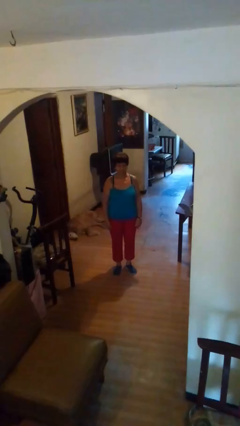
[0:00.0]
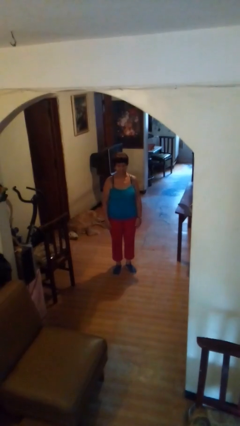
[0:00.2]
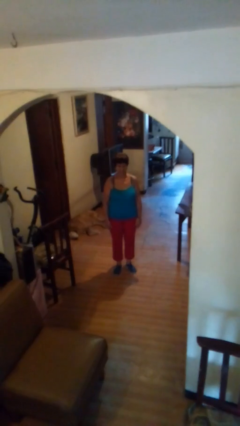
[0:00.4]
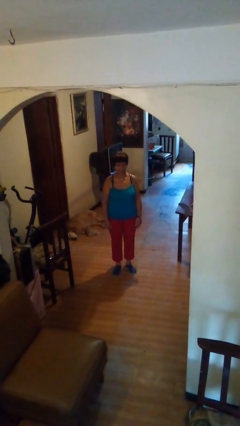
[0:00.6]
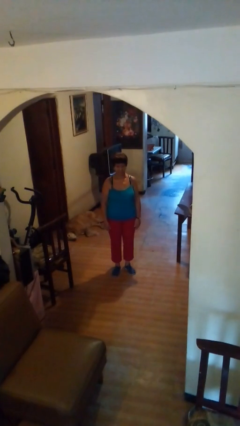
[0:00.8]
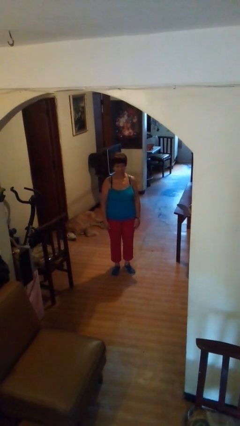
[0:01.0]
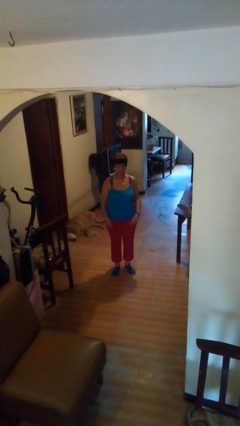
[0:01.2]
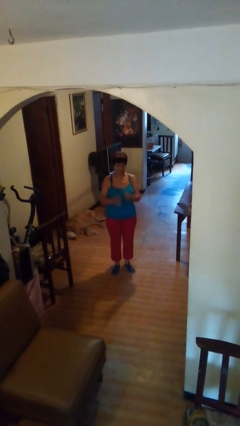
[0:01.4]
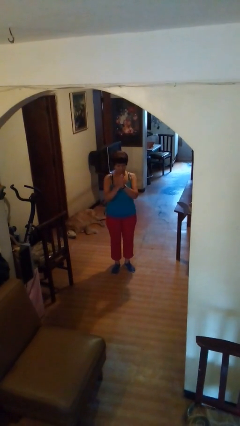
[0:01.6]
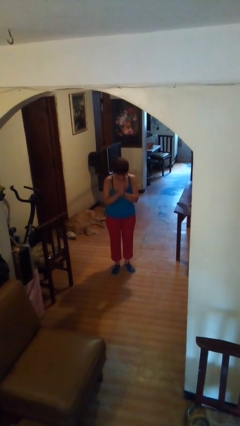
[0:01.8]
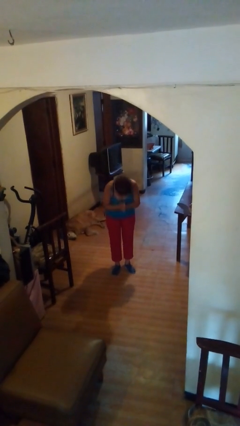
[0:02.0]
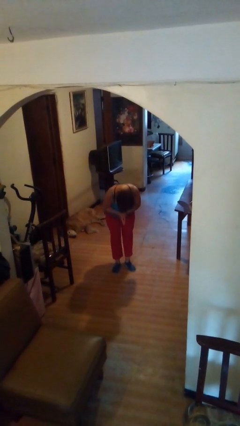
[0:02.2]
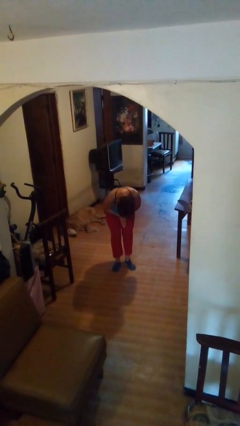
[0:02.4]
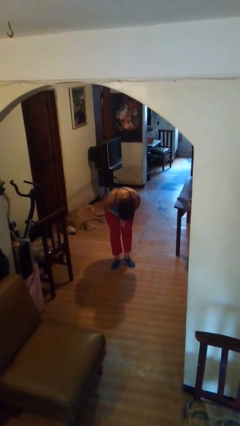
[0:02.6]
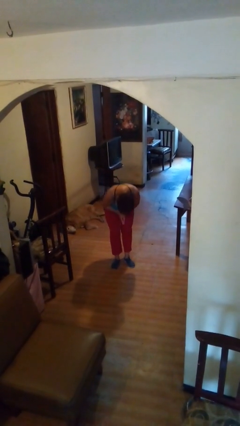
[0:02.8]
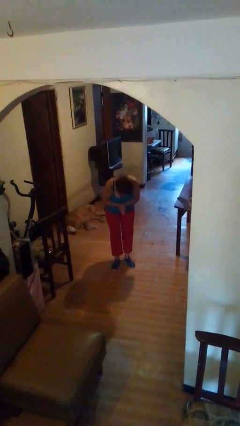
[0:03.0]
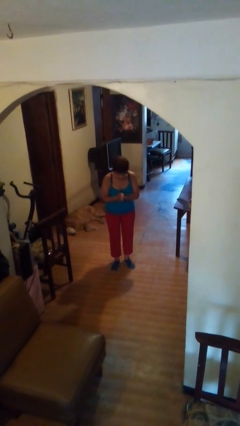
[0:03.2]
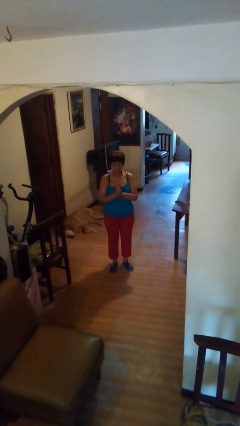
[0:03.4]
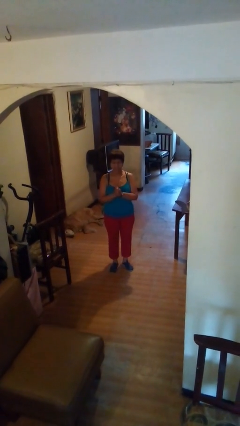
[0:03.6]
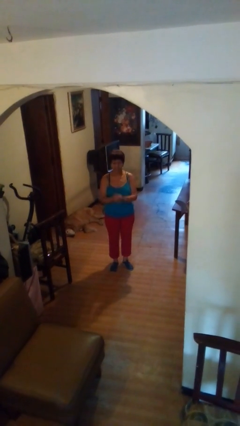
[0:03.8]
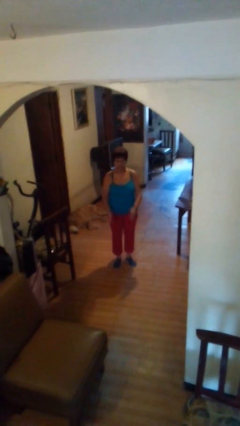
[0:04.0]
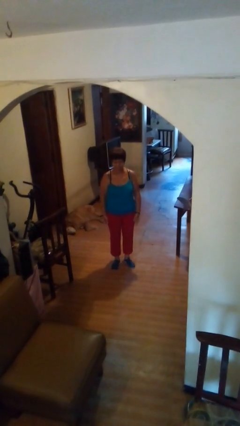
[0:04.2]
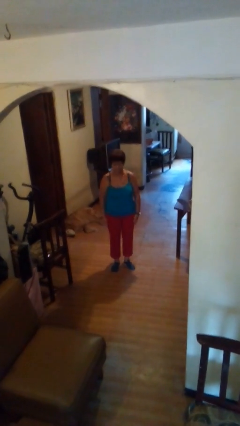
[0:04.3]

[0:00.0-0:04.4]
person bows

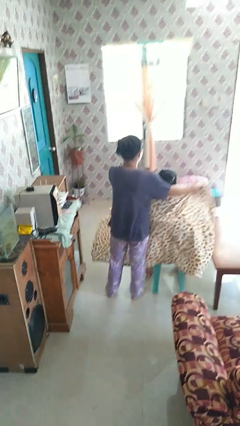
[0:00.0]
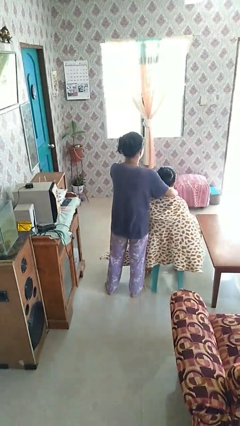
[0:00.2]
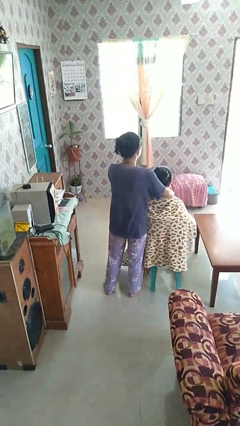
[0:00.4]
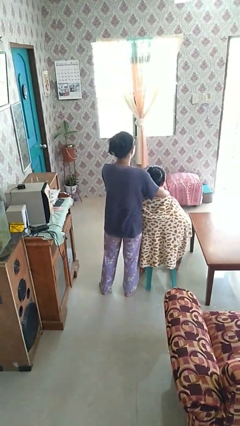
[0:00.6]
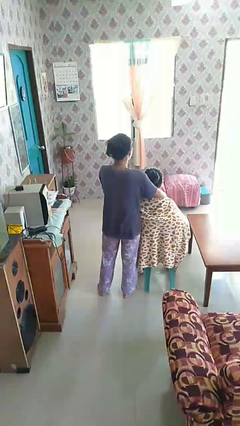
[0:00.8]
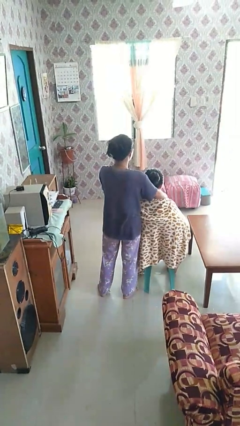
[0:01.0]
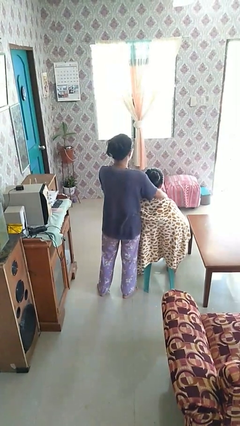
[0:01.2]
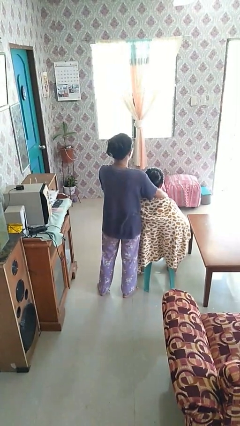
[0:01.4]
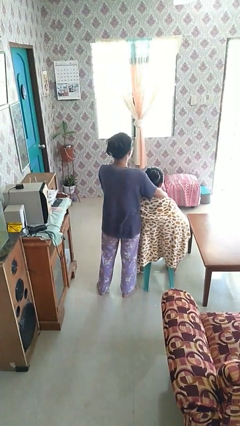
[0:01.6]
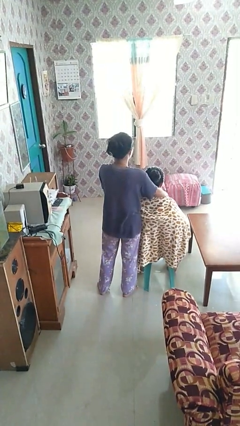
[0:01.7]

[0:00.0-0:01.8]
person covers friend with blanket

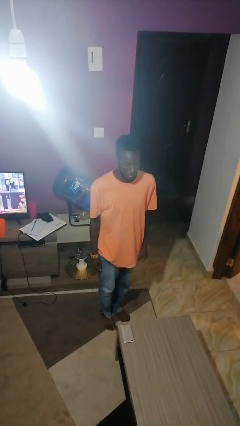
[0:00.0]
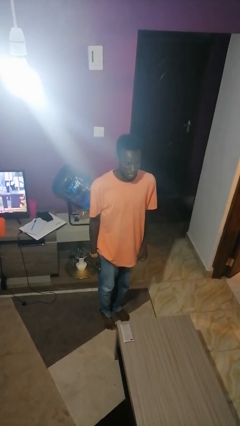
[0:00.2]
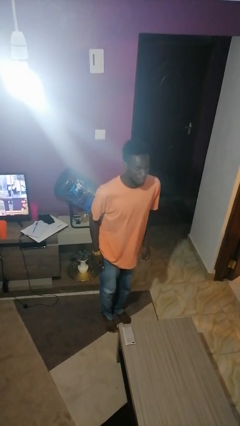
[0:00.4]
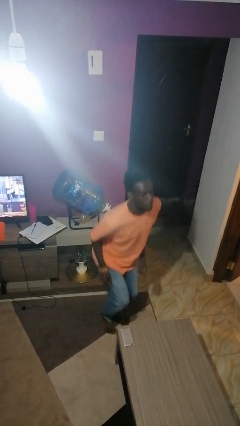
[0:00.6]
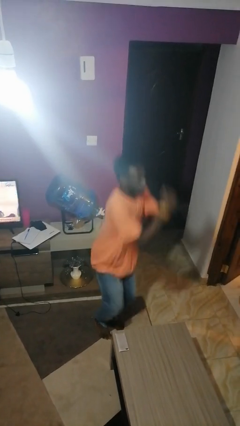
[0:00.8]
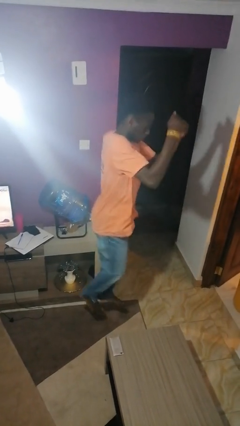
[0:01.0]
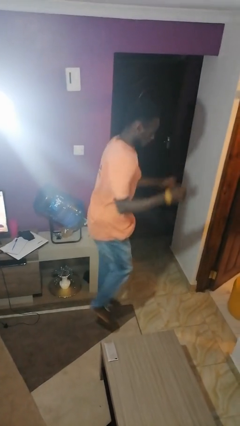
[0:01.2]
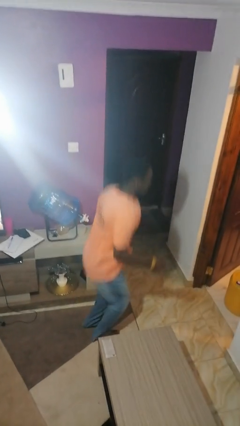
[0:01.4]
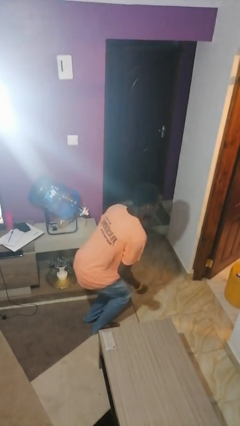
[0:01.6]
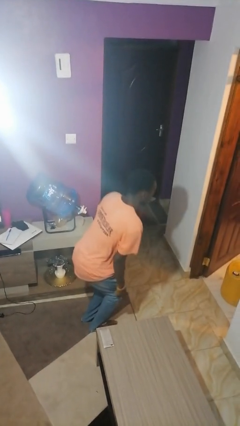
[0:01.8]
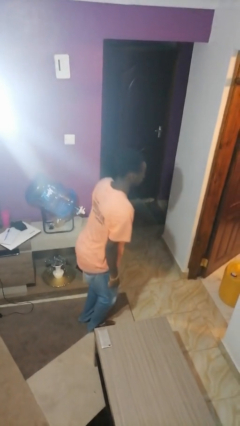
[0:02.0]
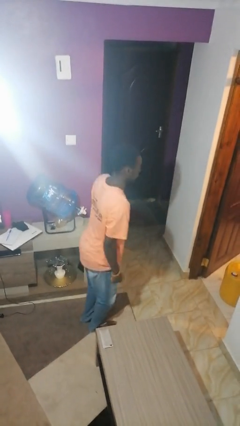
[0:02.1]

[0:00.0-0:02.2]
person jumps

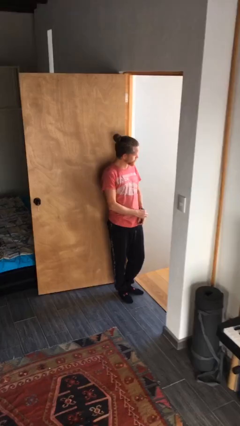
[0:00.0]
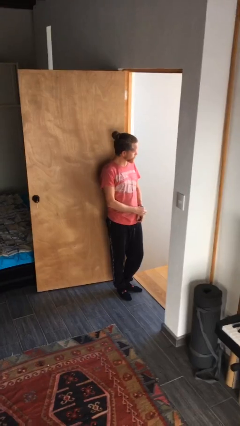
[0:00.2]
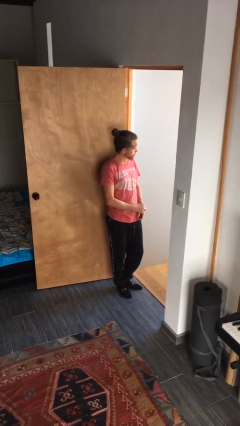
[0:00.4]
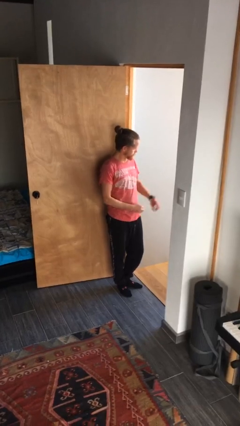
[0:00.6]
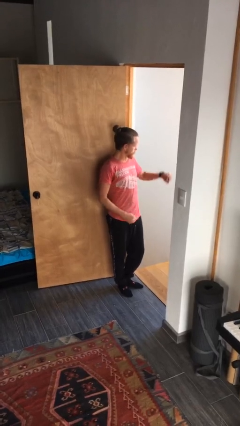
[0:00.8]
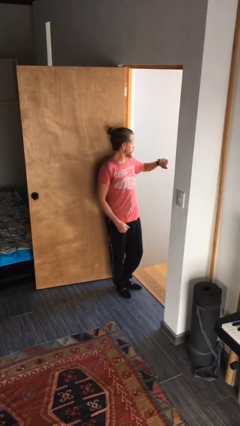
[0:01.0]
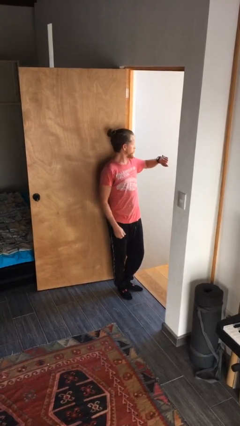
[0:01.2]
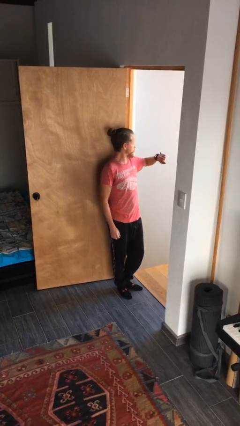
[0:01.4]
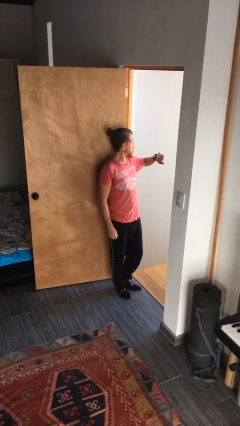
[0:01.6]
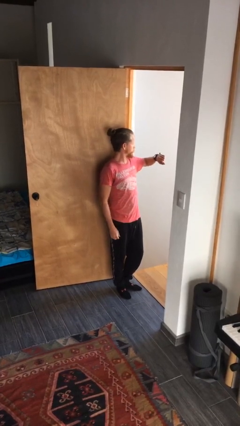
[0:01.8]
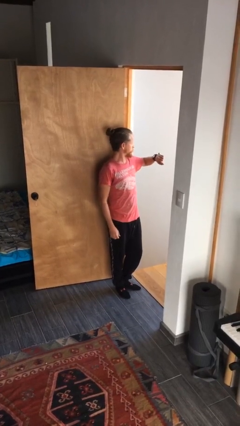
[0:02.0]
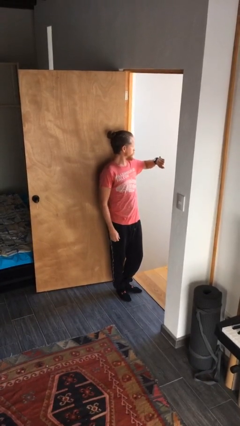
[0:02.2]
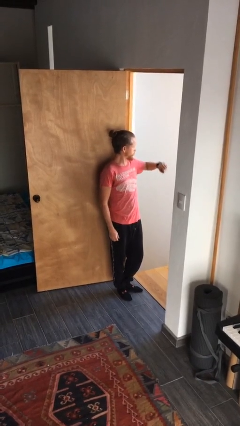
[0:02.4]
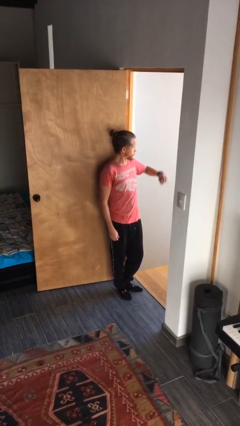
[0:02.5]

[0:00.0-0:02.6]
person looks at wristwatch

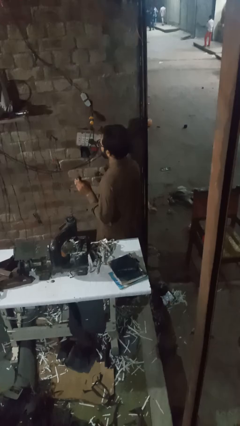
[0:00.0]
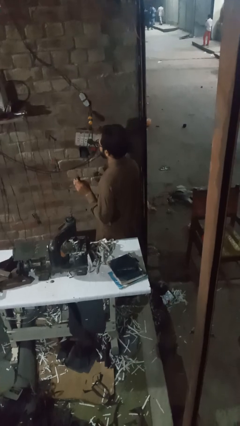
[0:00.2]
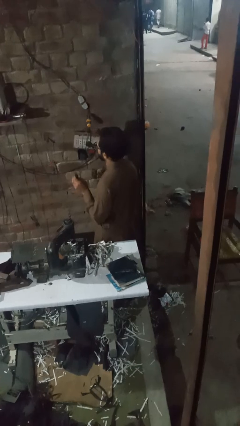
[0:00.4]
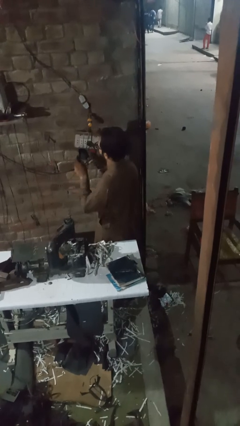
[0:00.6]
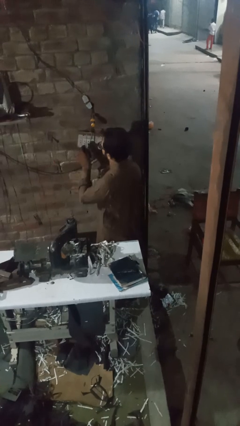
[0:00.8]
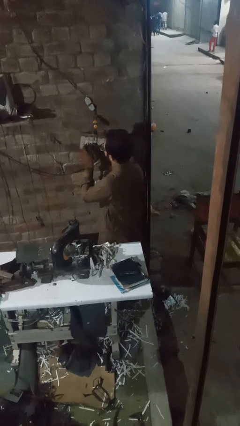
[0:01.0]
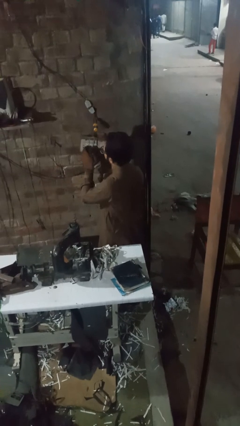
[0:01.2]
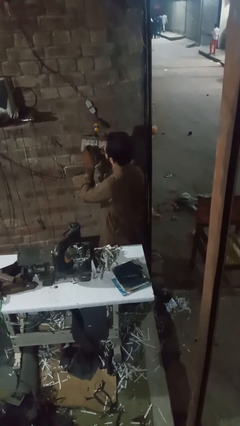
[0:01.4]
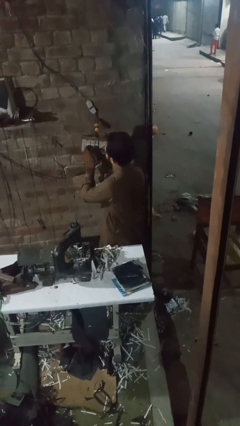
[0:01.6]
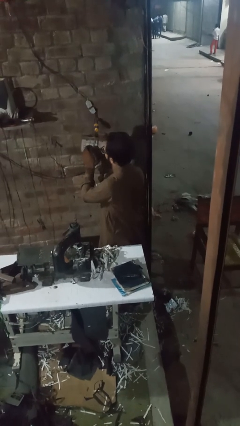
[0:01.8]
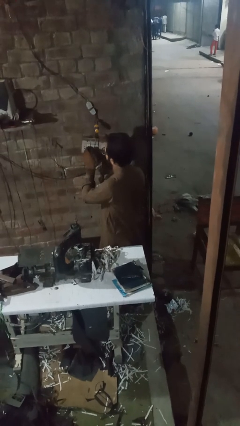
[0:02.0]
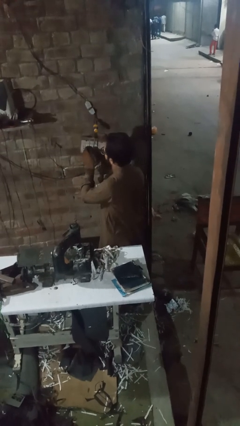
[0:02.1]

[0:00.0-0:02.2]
person plugs into electrical socket

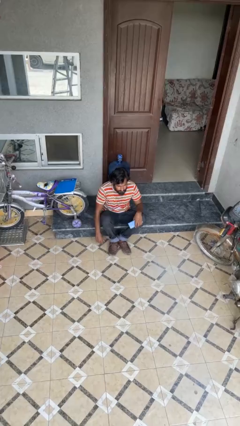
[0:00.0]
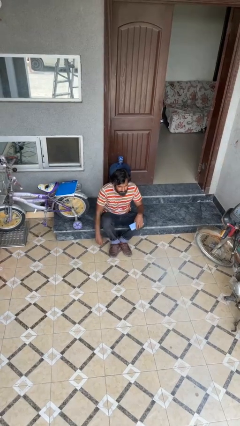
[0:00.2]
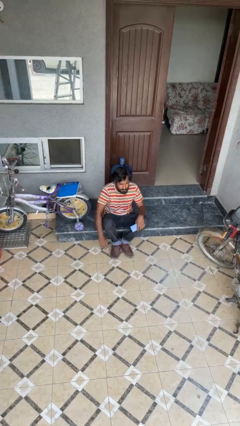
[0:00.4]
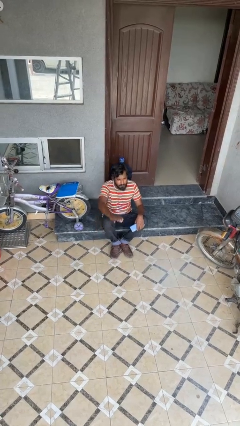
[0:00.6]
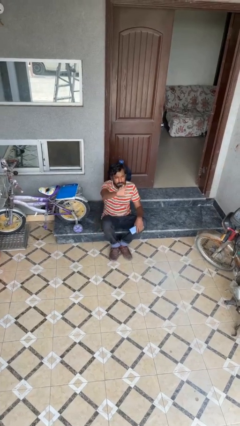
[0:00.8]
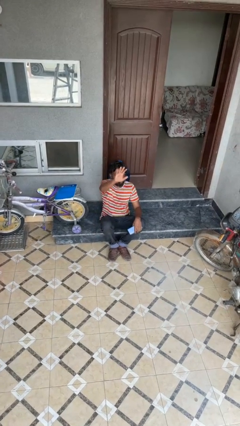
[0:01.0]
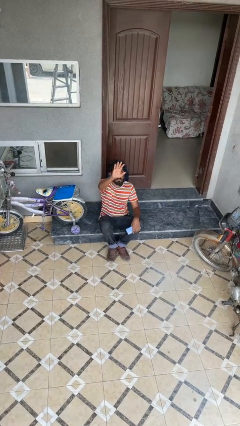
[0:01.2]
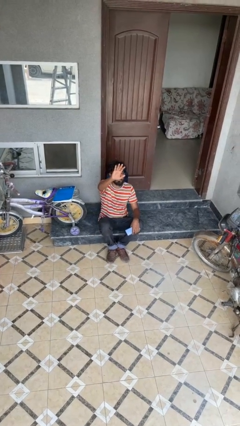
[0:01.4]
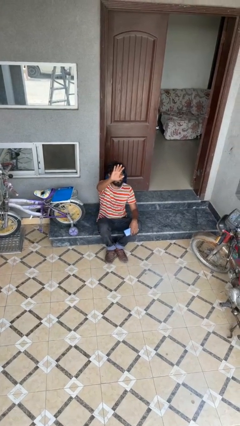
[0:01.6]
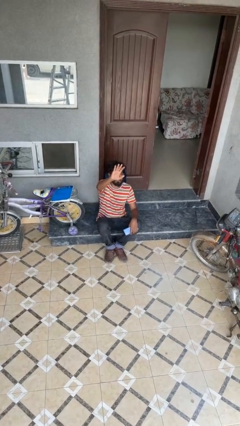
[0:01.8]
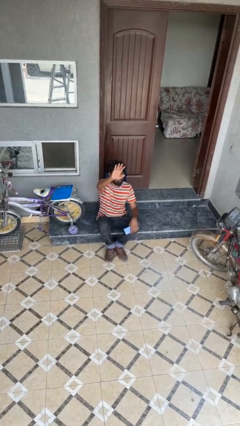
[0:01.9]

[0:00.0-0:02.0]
person gestures raise hand

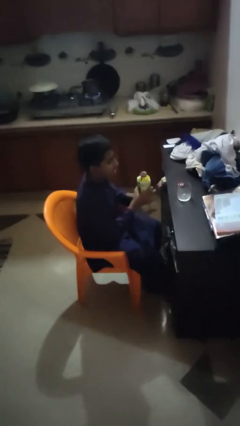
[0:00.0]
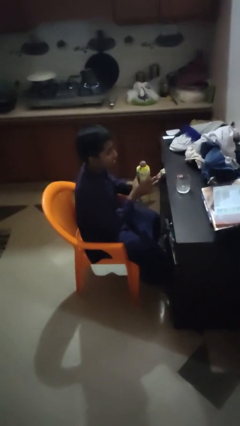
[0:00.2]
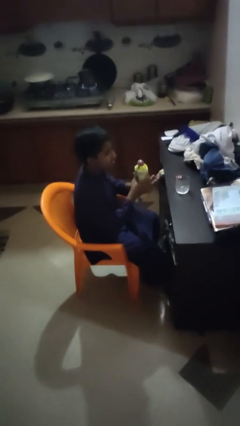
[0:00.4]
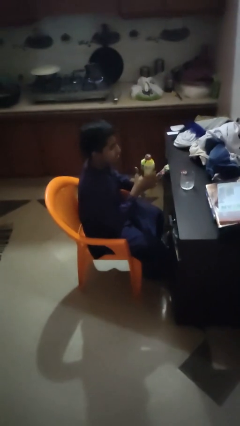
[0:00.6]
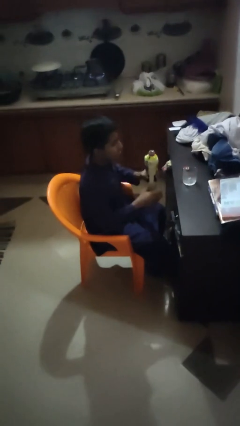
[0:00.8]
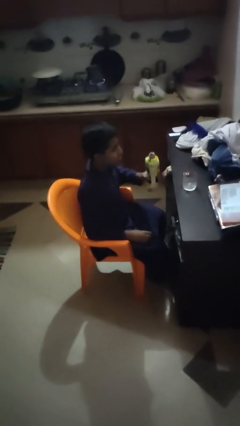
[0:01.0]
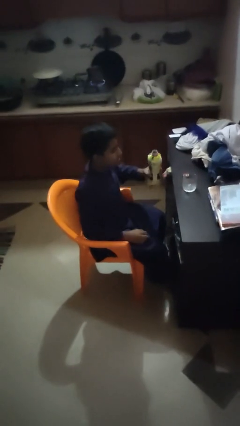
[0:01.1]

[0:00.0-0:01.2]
person pours liquid into cup

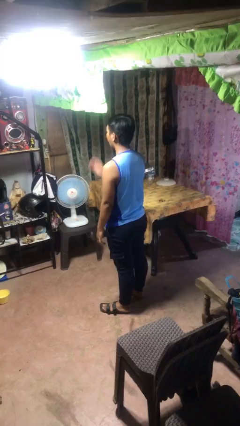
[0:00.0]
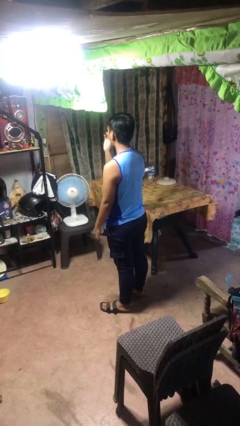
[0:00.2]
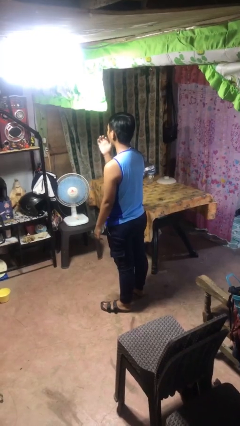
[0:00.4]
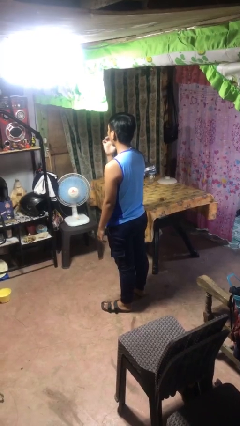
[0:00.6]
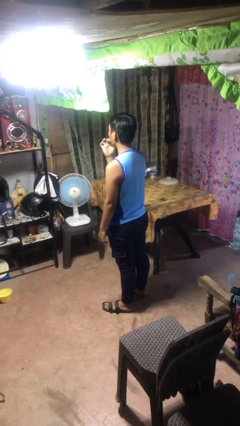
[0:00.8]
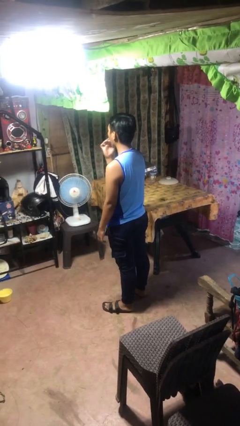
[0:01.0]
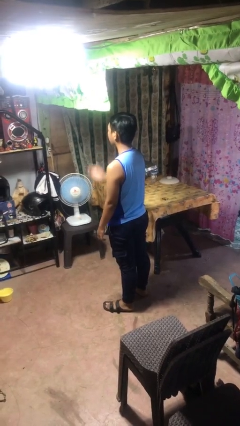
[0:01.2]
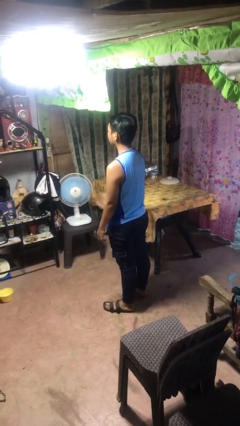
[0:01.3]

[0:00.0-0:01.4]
person licks fingers
